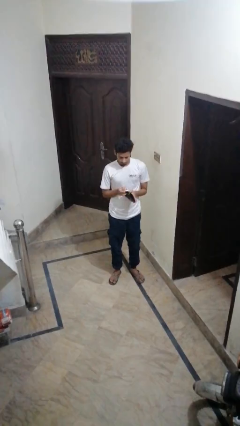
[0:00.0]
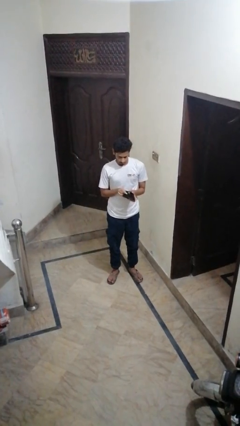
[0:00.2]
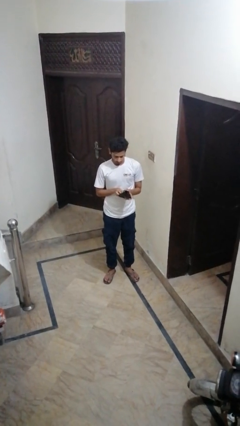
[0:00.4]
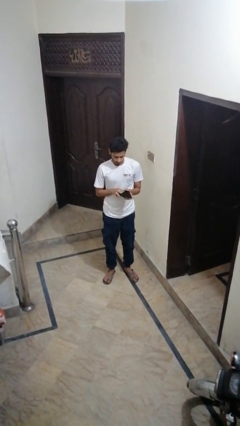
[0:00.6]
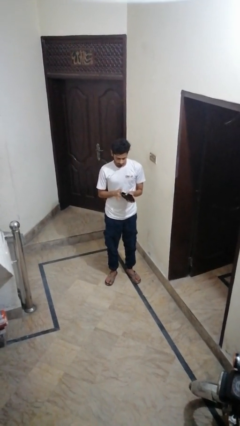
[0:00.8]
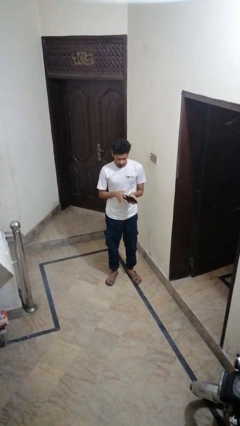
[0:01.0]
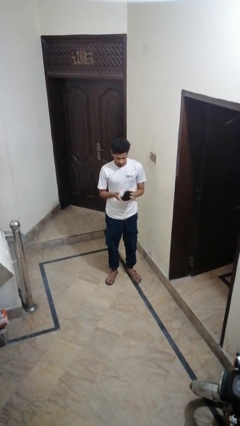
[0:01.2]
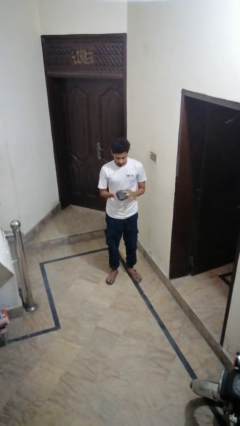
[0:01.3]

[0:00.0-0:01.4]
person puts object into purse

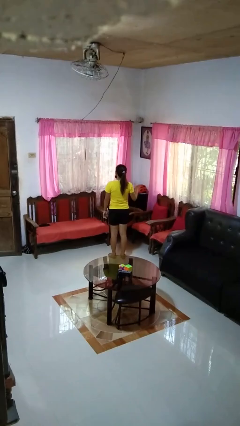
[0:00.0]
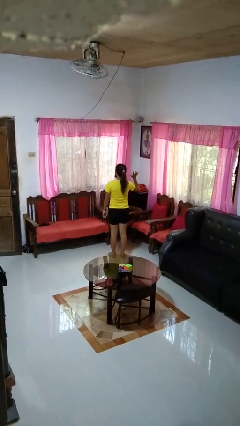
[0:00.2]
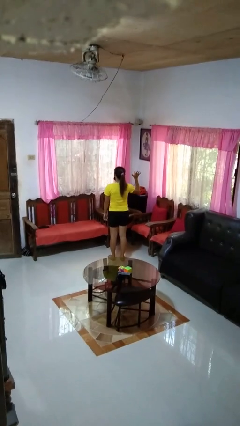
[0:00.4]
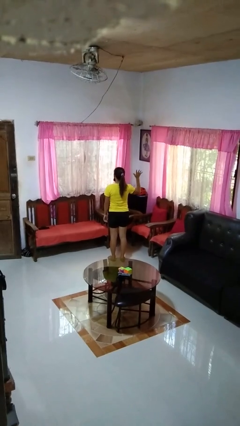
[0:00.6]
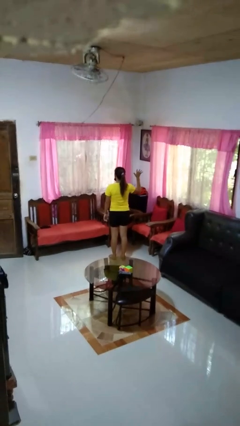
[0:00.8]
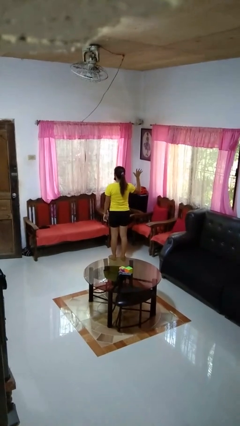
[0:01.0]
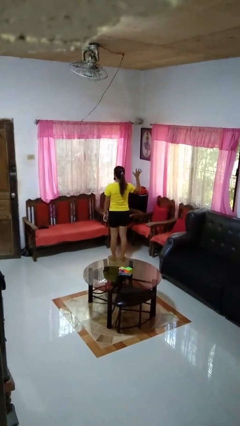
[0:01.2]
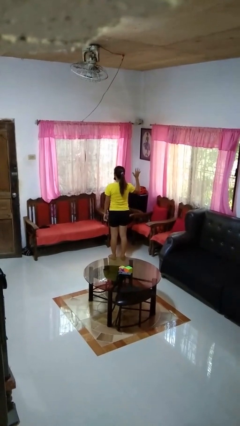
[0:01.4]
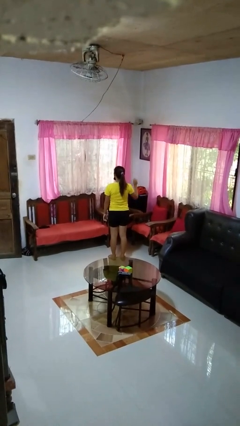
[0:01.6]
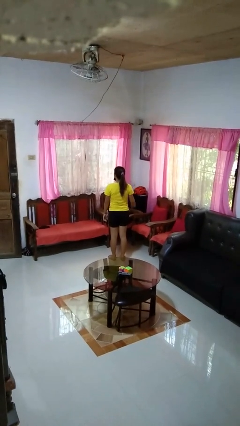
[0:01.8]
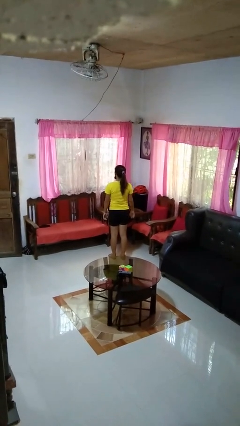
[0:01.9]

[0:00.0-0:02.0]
person gestures number five

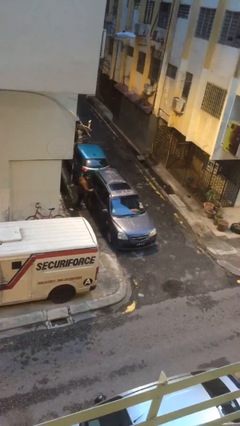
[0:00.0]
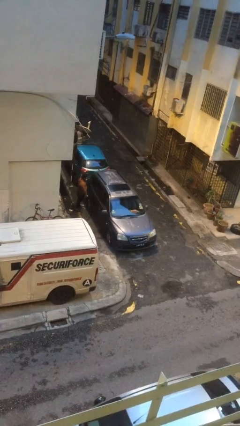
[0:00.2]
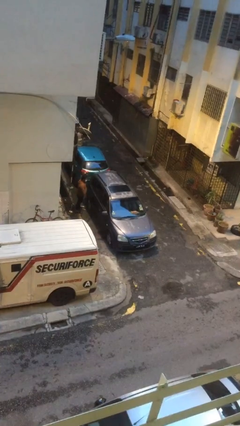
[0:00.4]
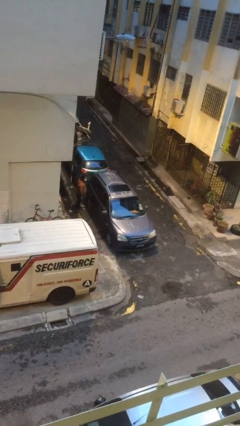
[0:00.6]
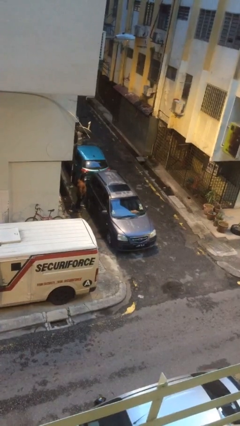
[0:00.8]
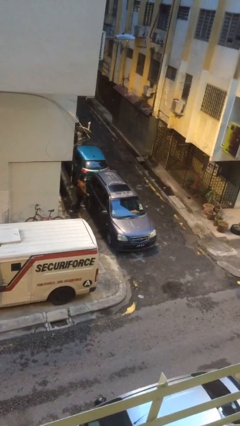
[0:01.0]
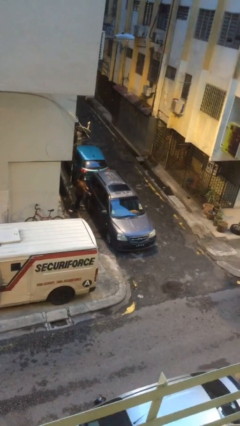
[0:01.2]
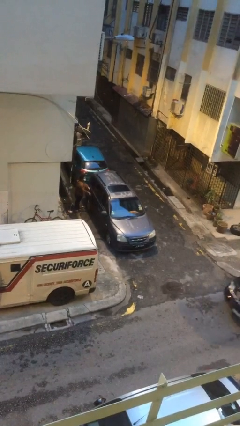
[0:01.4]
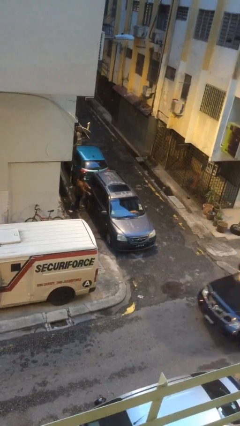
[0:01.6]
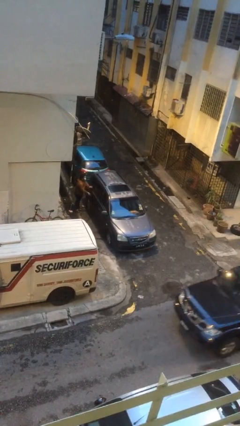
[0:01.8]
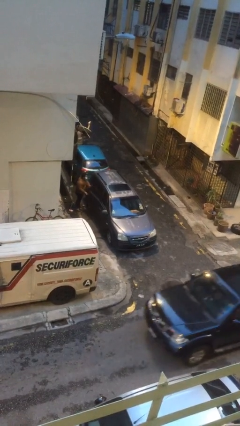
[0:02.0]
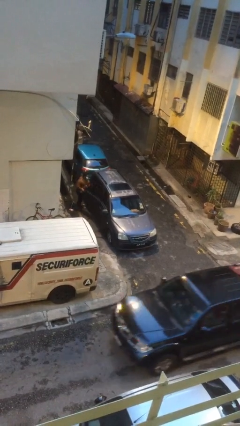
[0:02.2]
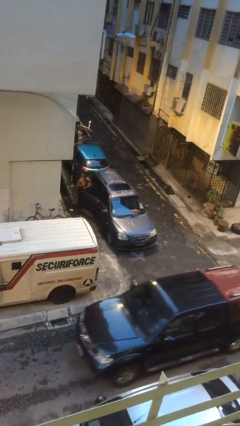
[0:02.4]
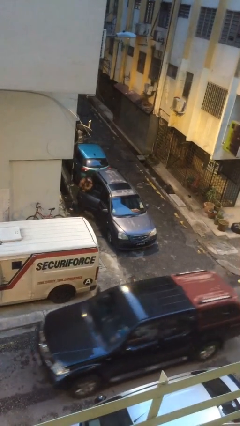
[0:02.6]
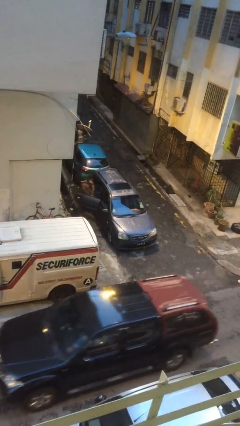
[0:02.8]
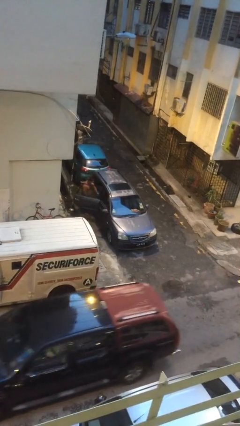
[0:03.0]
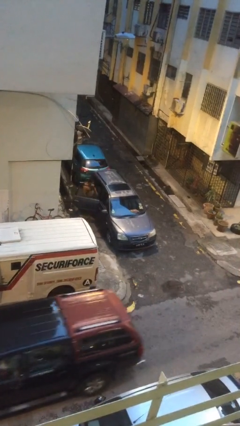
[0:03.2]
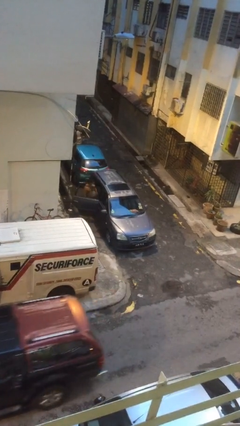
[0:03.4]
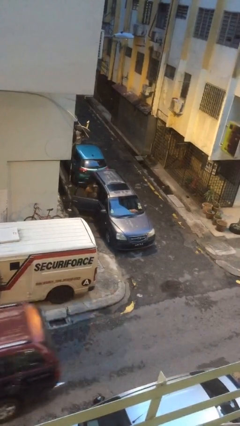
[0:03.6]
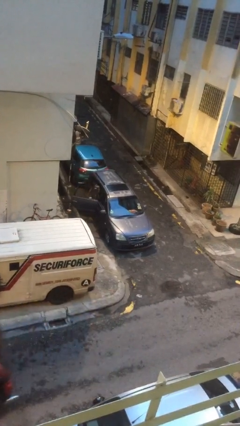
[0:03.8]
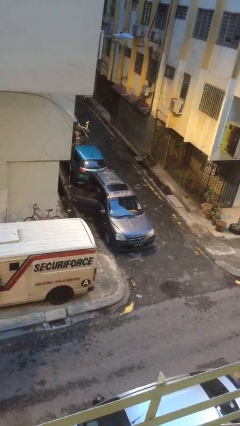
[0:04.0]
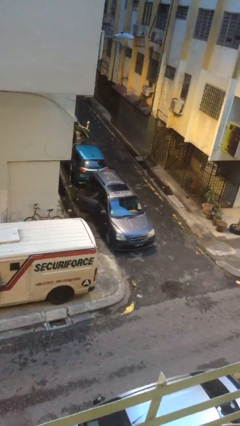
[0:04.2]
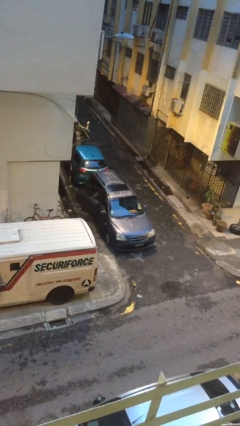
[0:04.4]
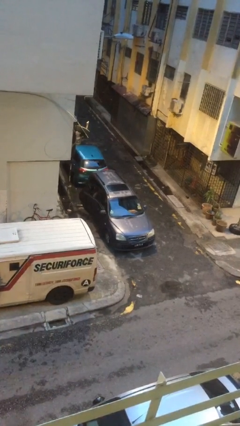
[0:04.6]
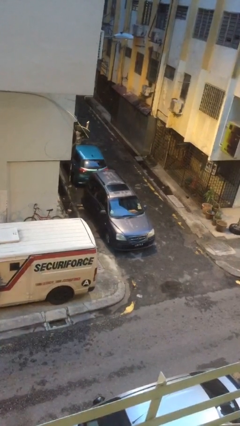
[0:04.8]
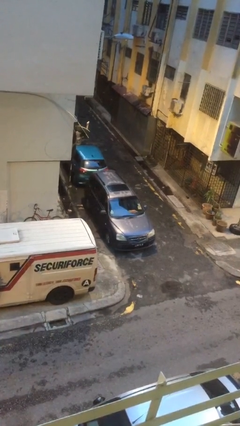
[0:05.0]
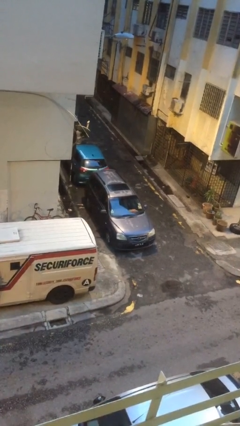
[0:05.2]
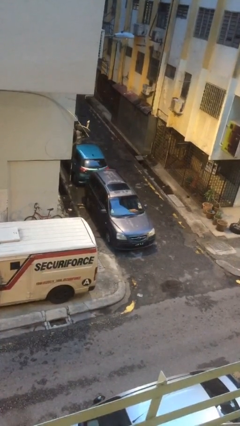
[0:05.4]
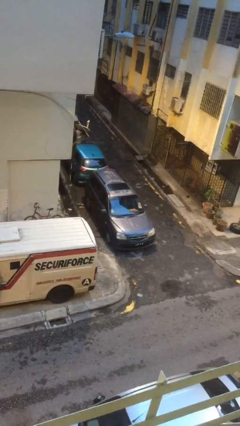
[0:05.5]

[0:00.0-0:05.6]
car picks up person

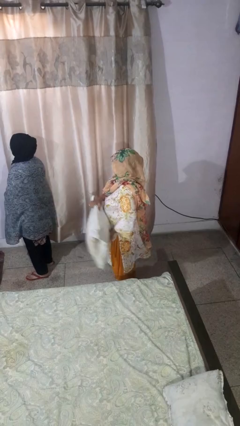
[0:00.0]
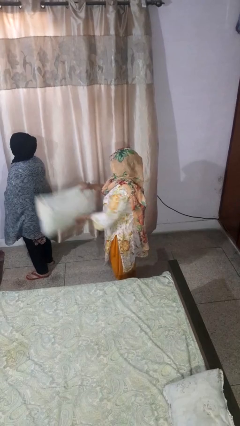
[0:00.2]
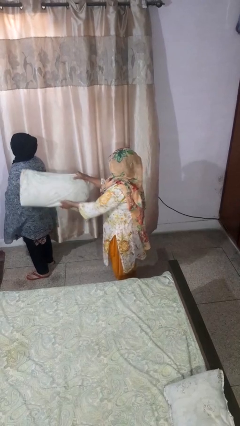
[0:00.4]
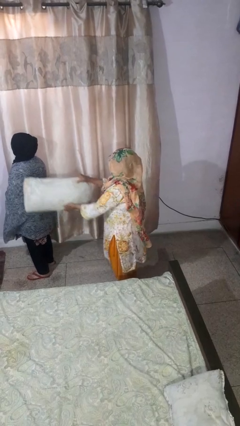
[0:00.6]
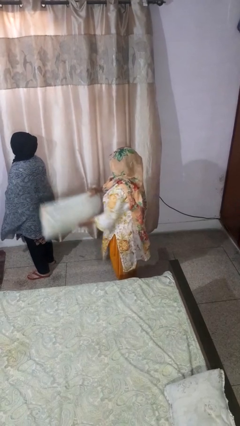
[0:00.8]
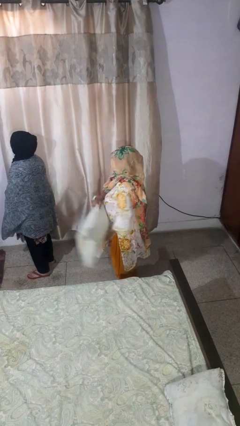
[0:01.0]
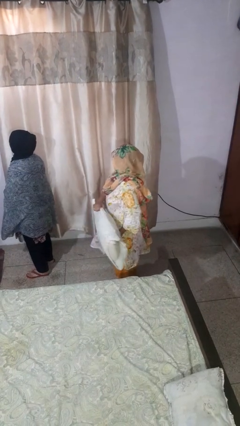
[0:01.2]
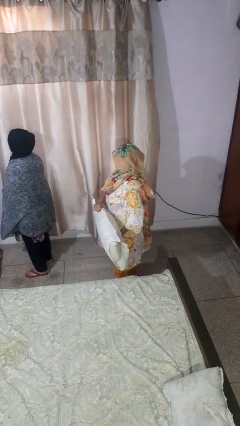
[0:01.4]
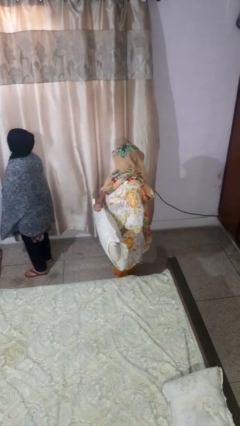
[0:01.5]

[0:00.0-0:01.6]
person hits person with pillow

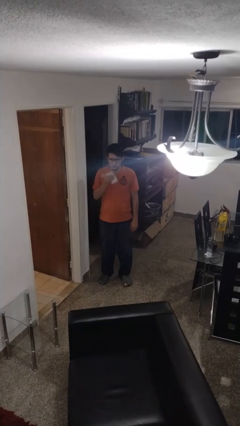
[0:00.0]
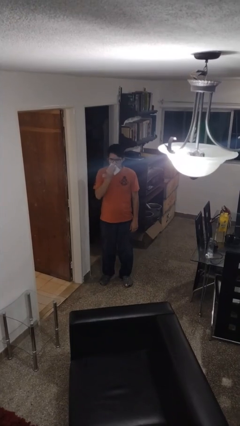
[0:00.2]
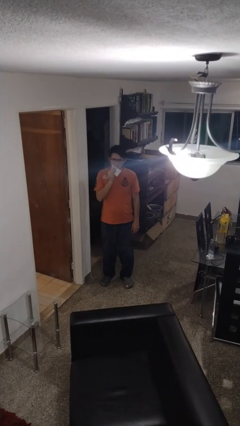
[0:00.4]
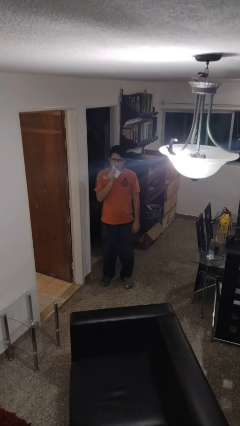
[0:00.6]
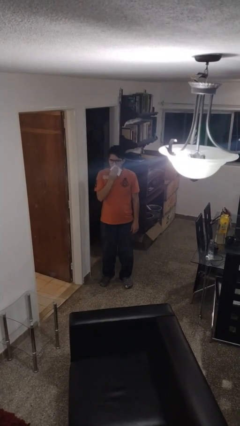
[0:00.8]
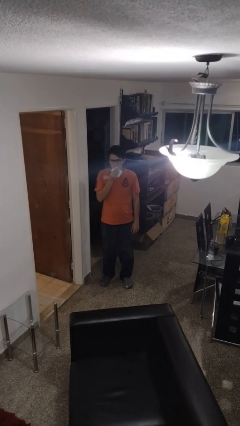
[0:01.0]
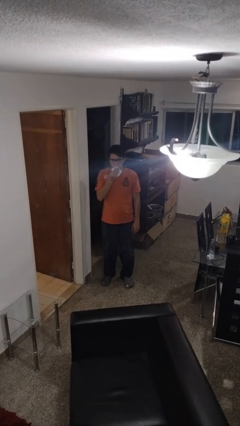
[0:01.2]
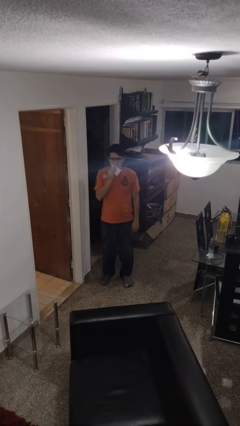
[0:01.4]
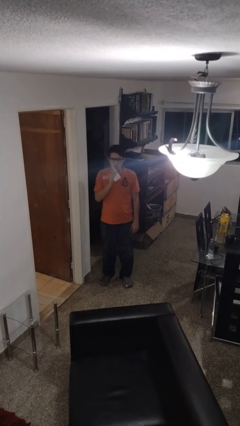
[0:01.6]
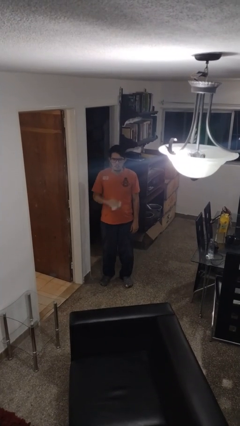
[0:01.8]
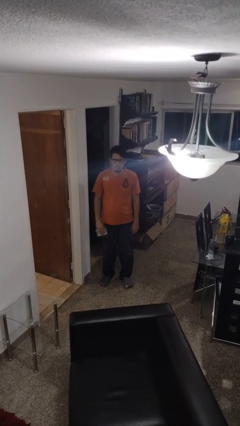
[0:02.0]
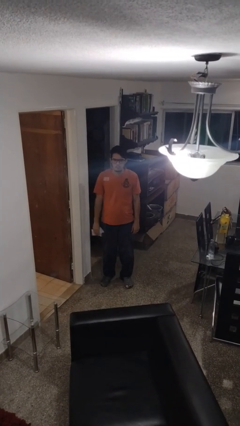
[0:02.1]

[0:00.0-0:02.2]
person wipes mouth with napkin

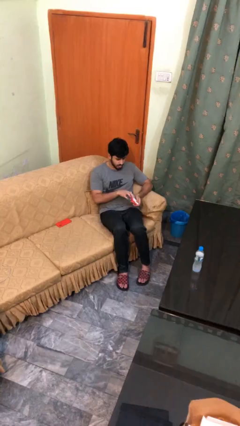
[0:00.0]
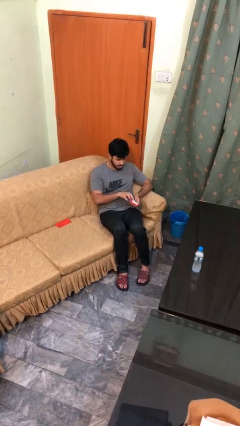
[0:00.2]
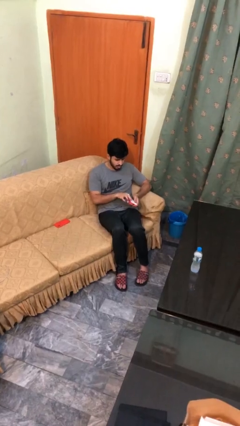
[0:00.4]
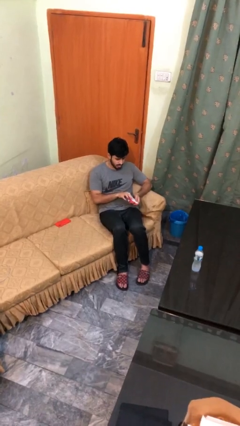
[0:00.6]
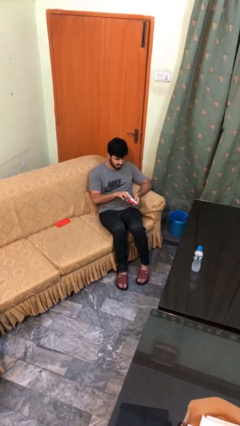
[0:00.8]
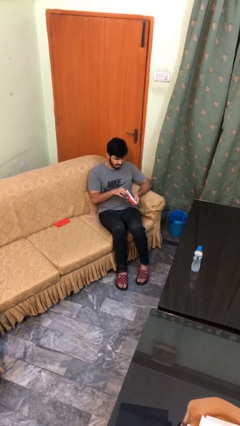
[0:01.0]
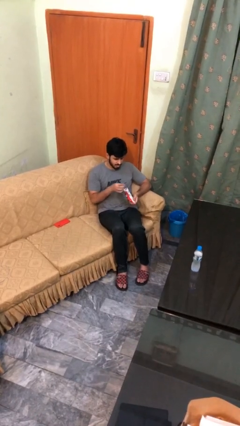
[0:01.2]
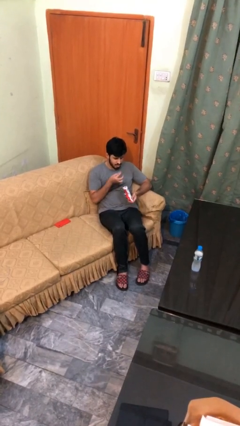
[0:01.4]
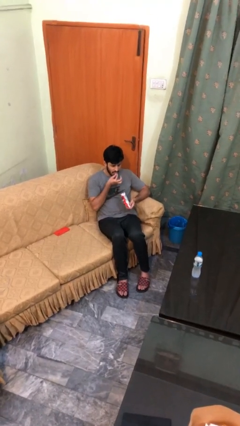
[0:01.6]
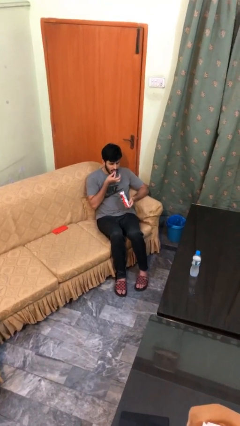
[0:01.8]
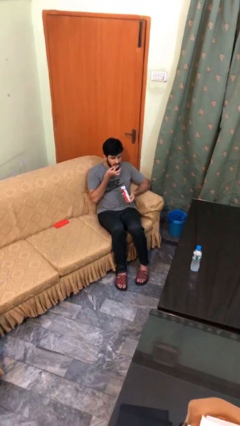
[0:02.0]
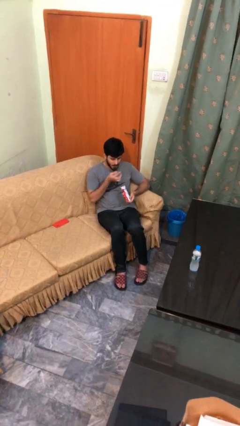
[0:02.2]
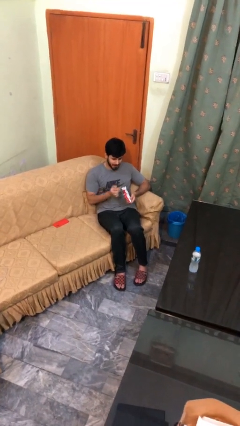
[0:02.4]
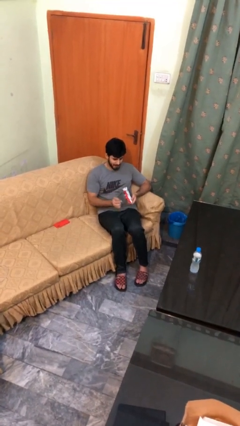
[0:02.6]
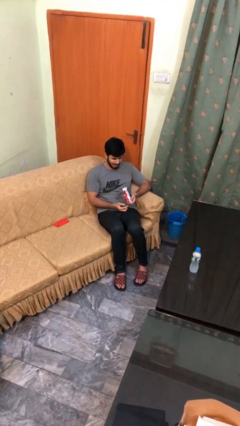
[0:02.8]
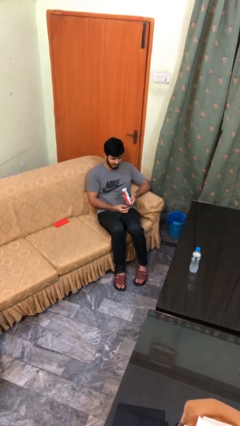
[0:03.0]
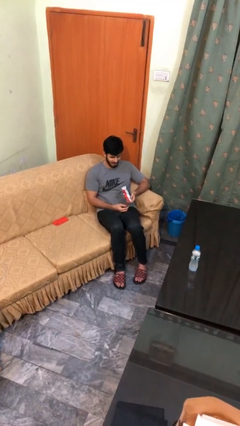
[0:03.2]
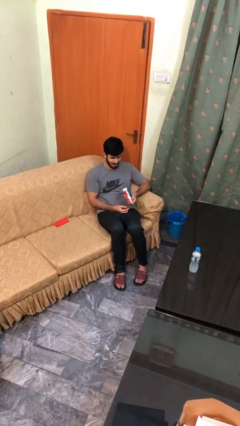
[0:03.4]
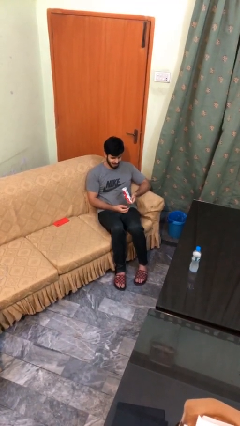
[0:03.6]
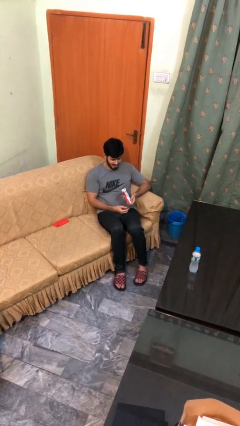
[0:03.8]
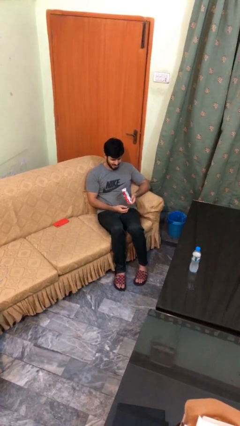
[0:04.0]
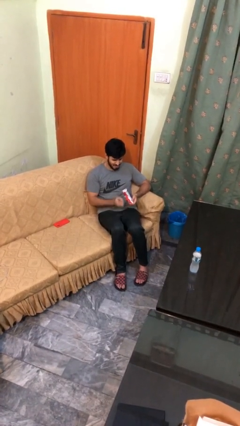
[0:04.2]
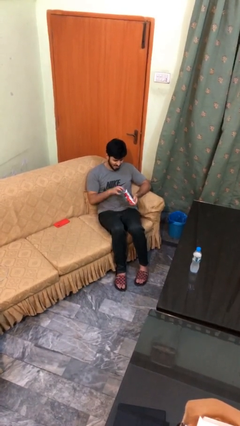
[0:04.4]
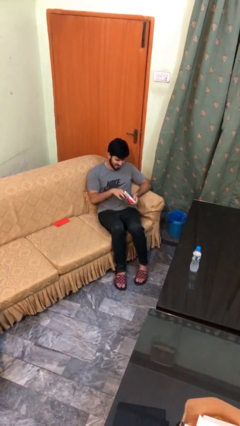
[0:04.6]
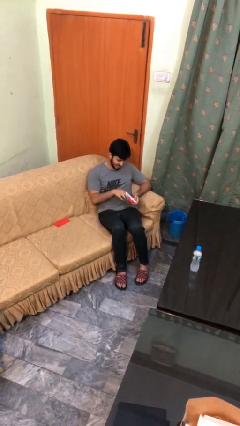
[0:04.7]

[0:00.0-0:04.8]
person eats snack from bag

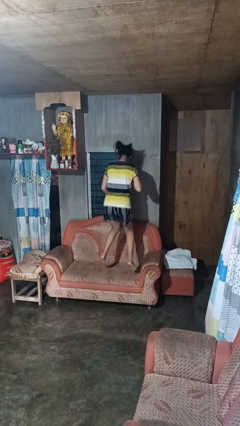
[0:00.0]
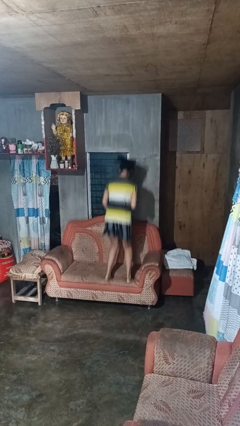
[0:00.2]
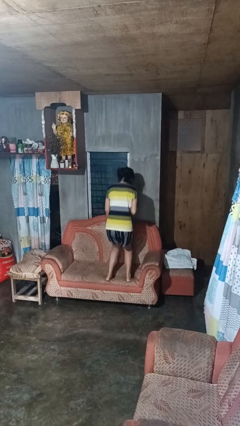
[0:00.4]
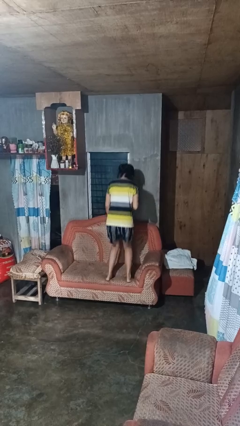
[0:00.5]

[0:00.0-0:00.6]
person jumps on couch
